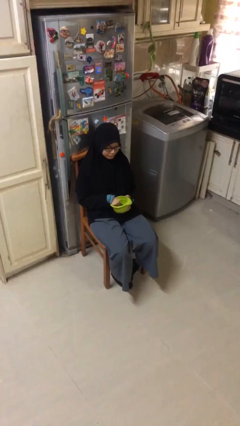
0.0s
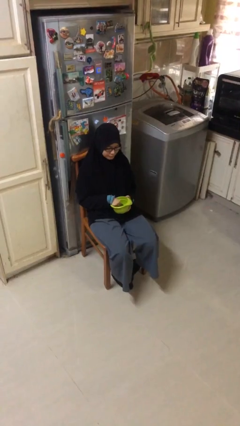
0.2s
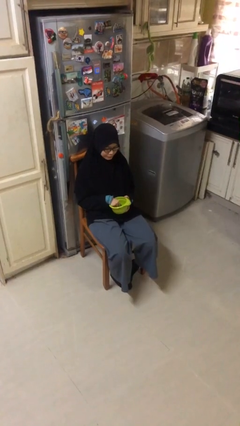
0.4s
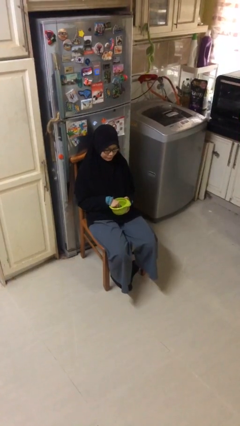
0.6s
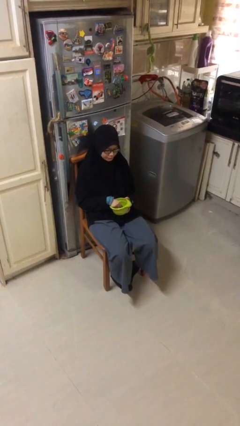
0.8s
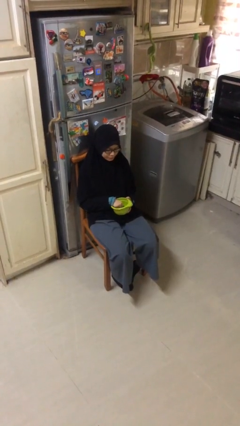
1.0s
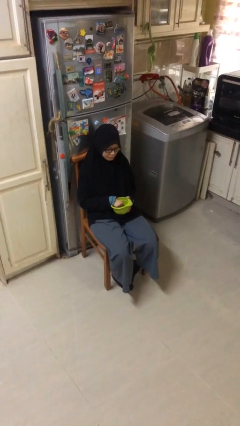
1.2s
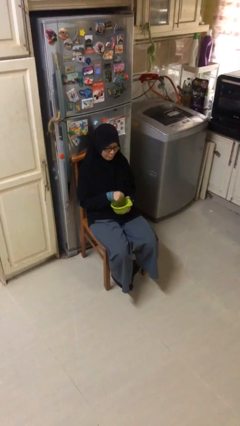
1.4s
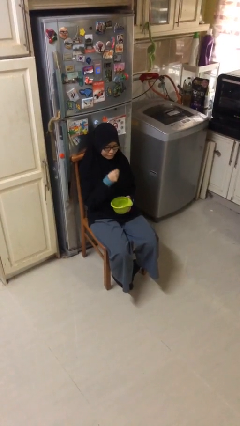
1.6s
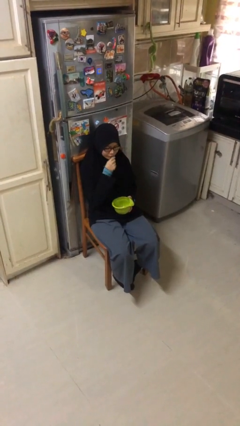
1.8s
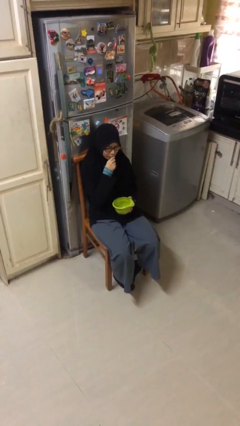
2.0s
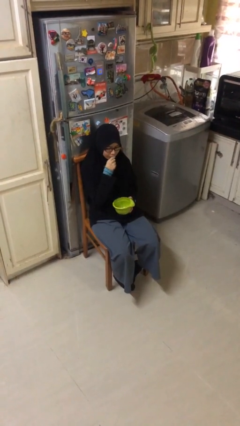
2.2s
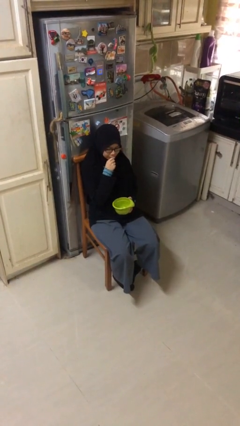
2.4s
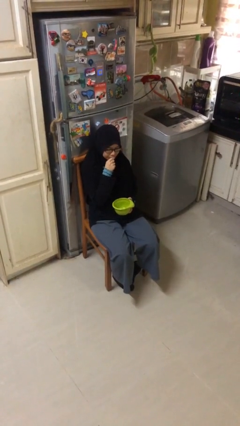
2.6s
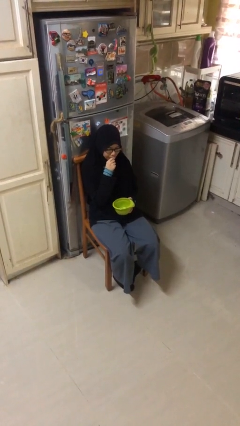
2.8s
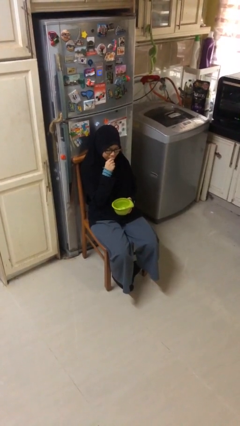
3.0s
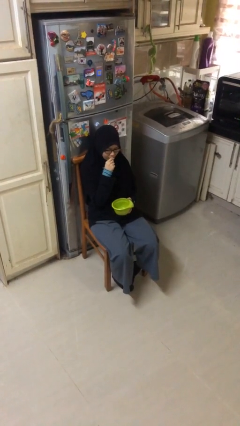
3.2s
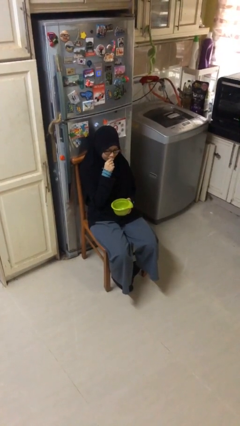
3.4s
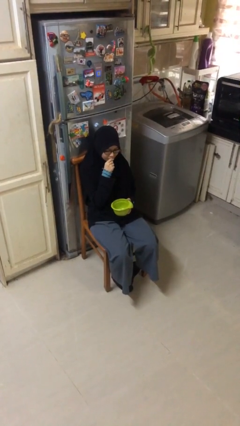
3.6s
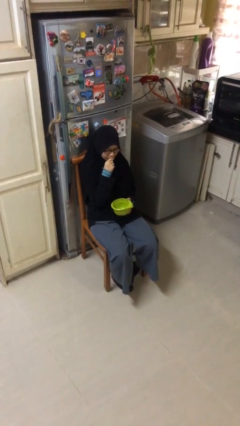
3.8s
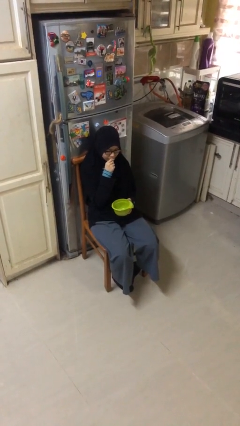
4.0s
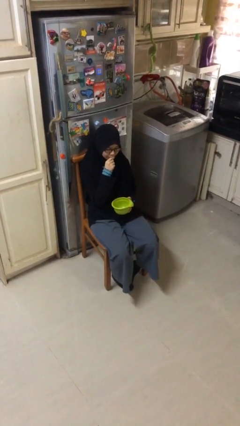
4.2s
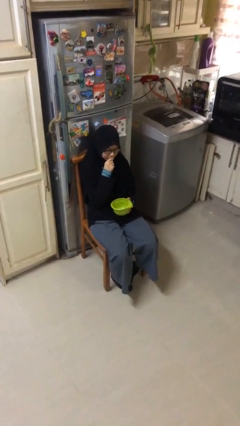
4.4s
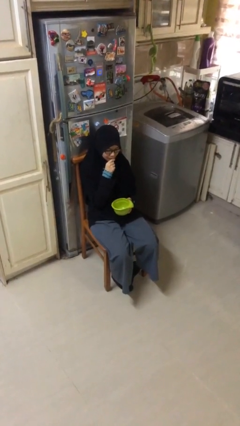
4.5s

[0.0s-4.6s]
person eats with hands

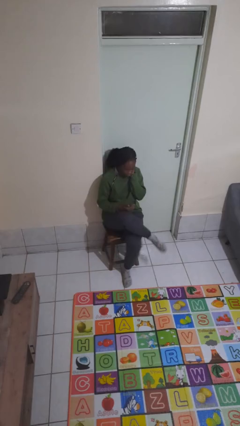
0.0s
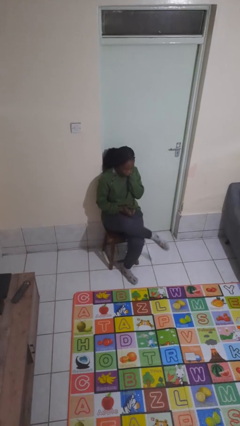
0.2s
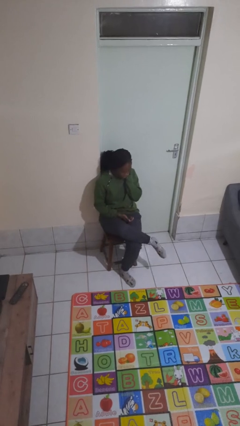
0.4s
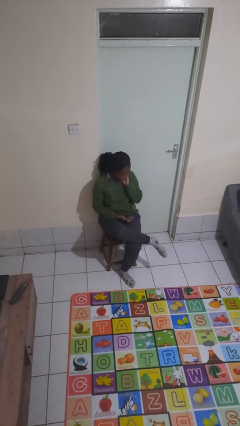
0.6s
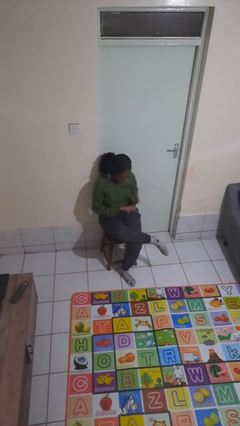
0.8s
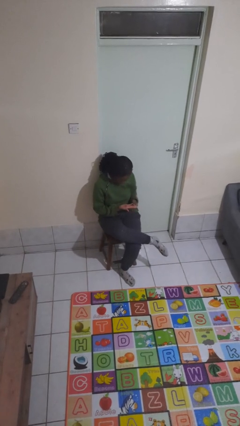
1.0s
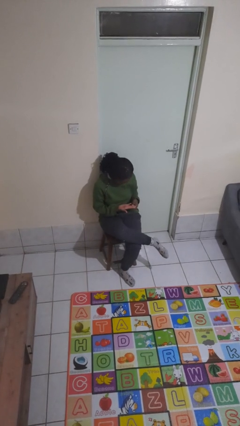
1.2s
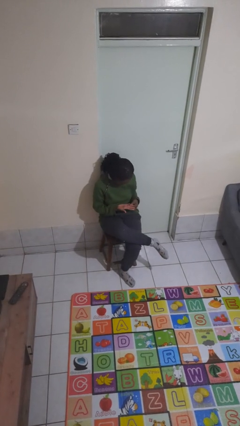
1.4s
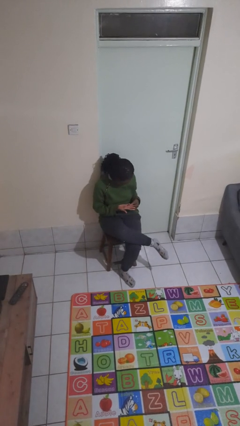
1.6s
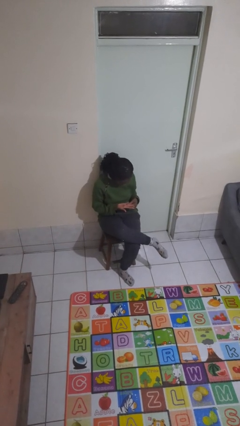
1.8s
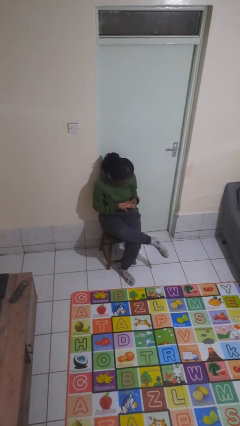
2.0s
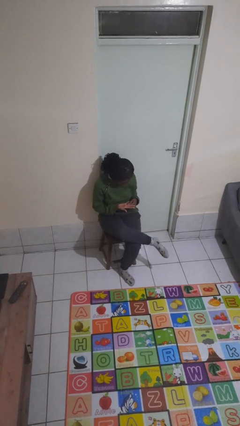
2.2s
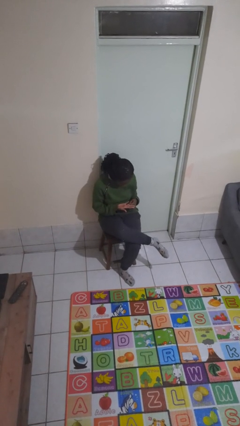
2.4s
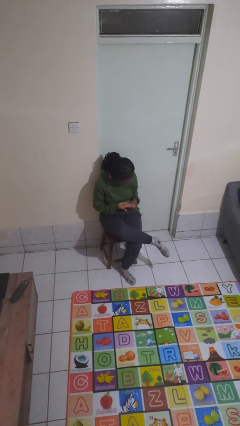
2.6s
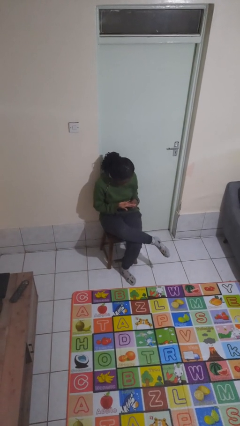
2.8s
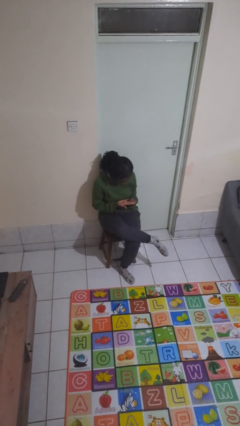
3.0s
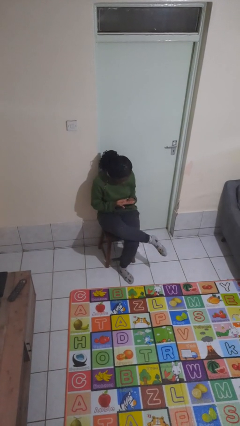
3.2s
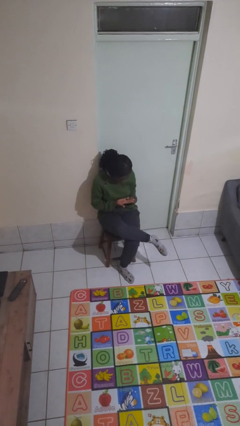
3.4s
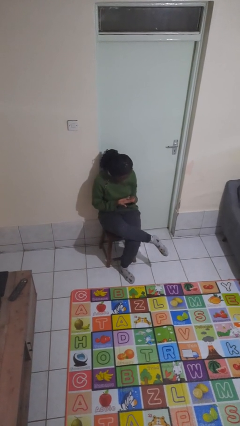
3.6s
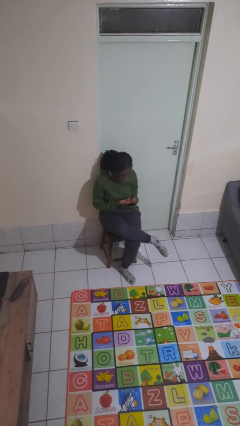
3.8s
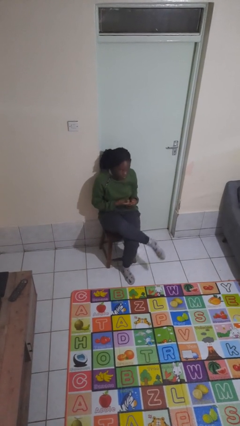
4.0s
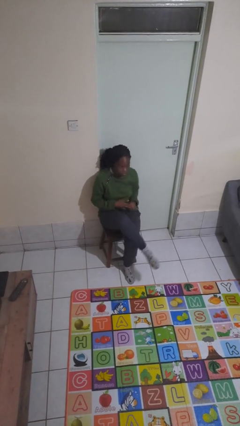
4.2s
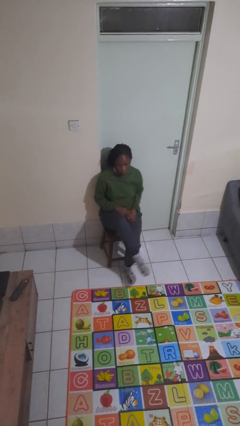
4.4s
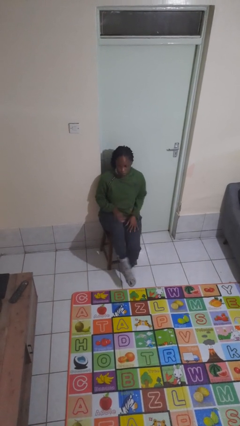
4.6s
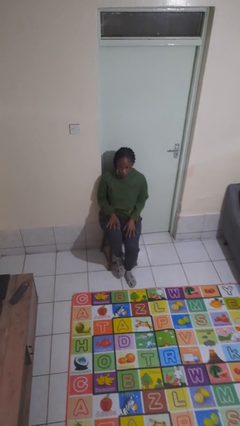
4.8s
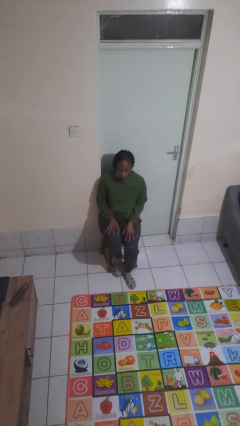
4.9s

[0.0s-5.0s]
person looks at hands in lap

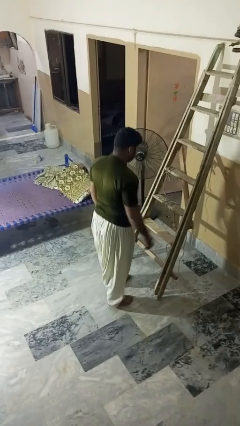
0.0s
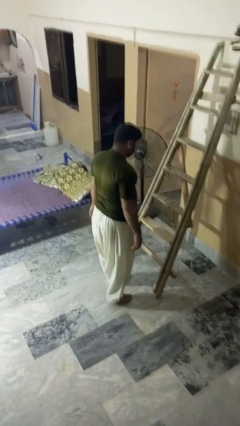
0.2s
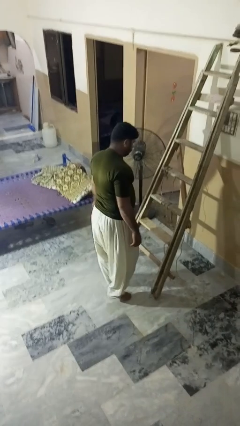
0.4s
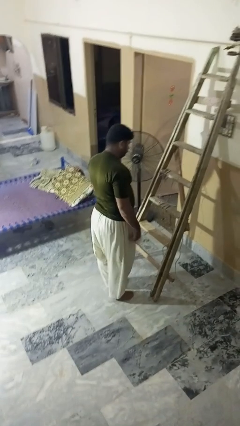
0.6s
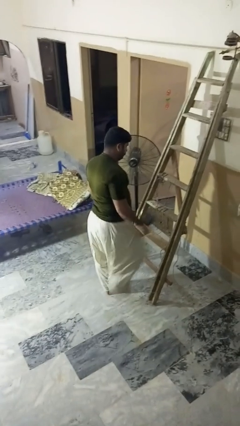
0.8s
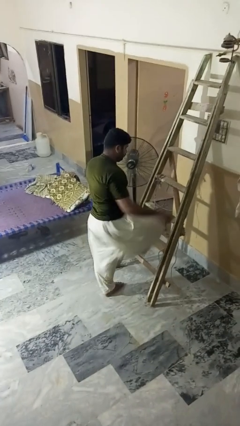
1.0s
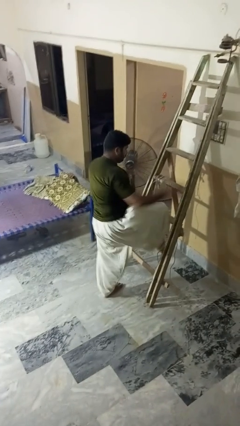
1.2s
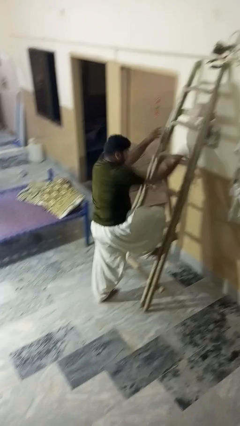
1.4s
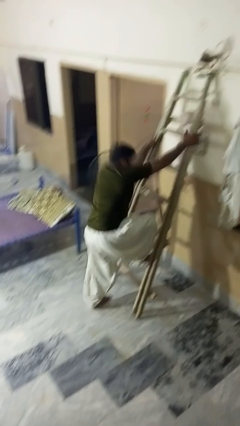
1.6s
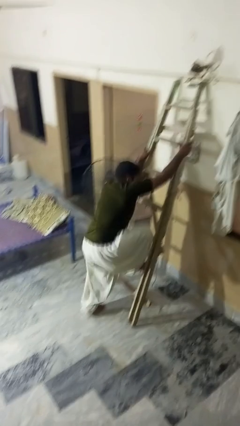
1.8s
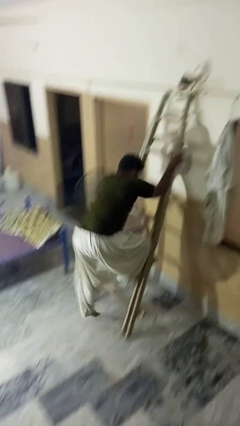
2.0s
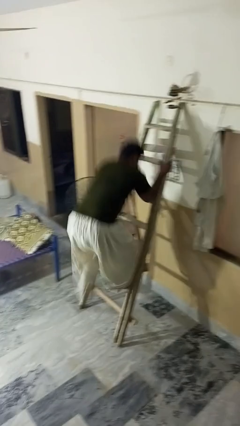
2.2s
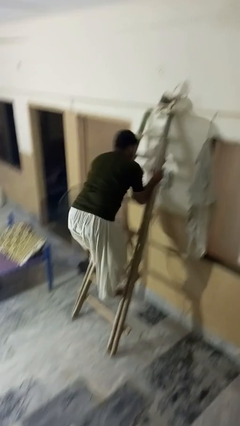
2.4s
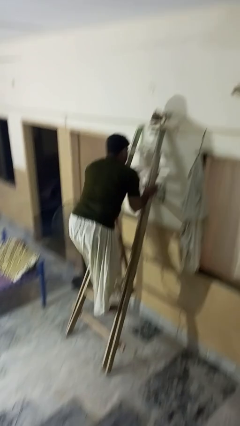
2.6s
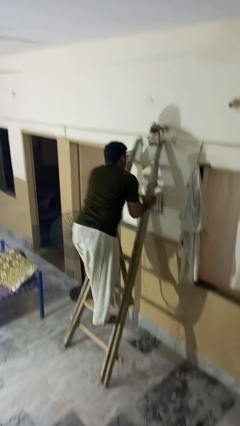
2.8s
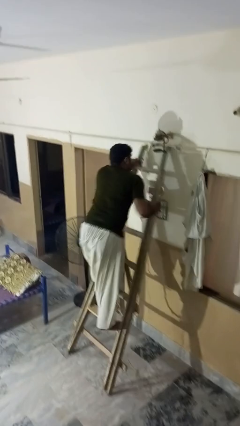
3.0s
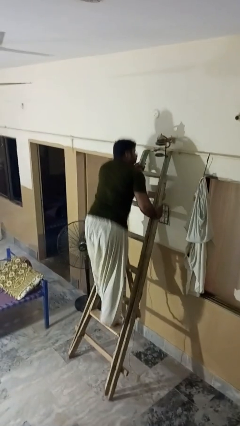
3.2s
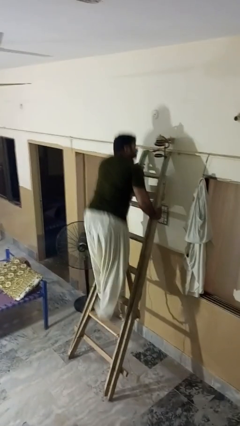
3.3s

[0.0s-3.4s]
person climbs up ladder

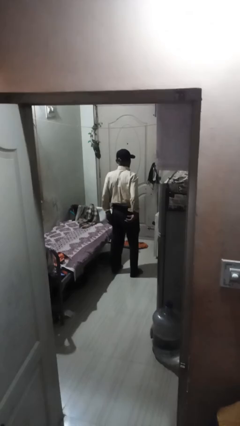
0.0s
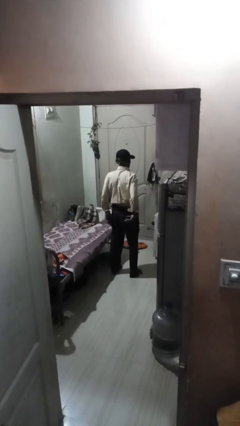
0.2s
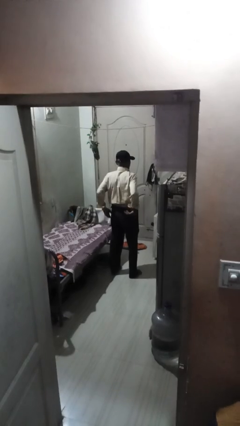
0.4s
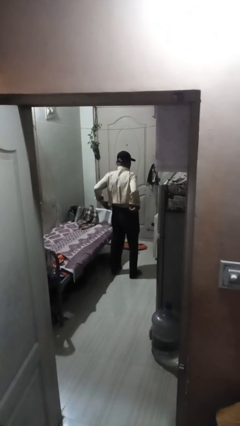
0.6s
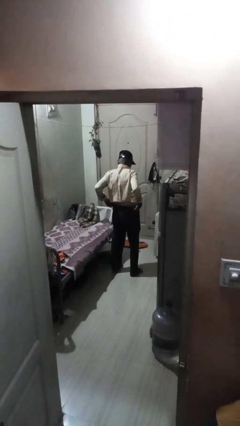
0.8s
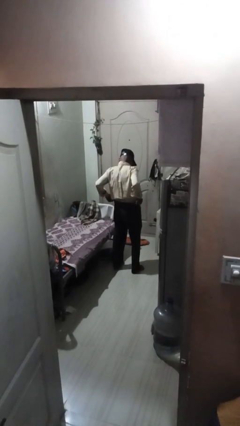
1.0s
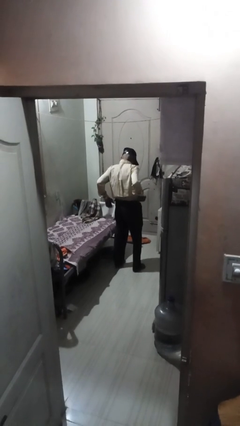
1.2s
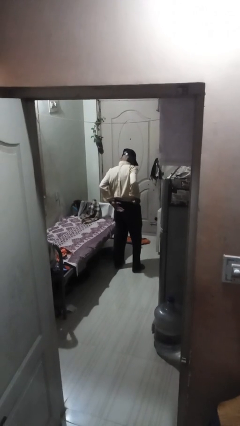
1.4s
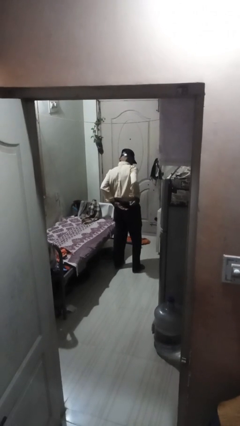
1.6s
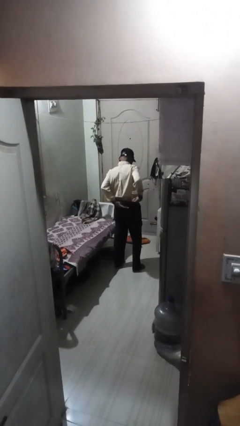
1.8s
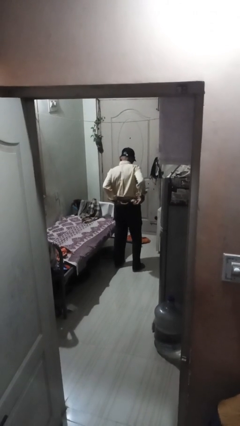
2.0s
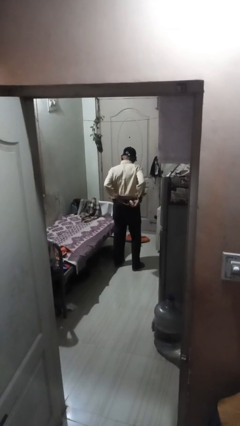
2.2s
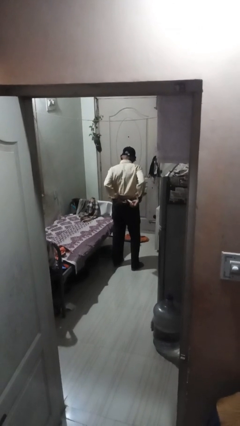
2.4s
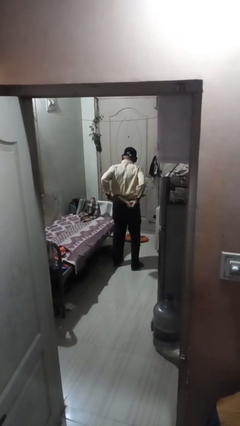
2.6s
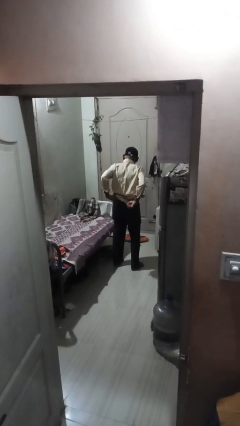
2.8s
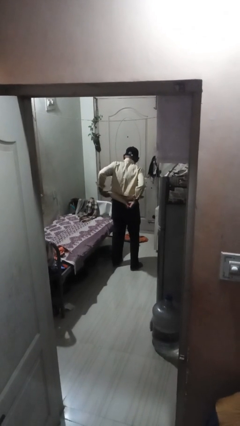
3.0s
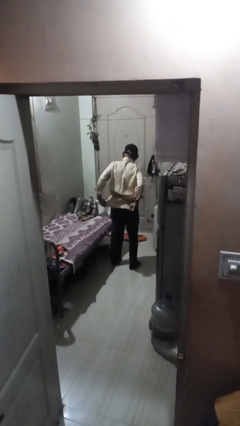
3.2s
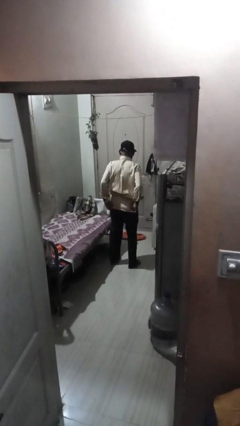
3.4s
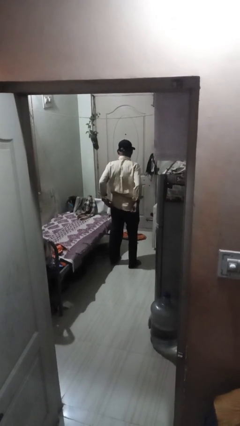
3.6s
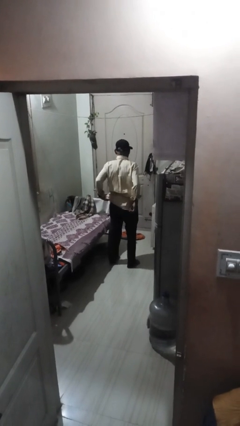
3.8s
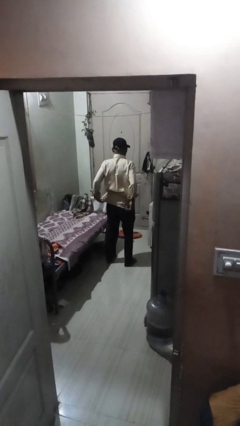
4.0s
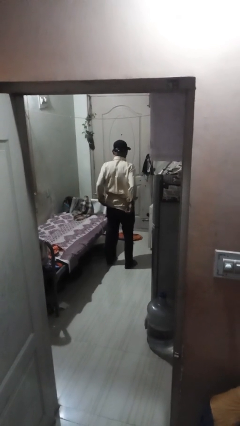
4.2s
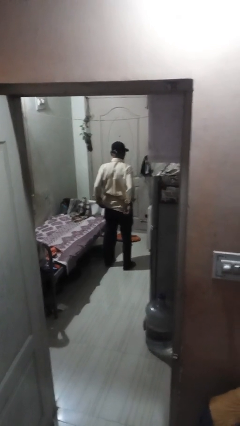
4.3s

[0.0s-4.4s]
person untucks shirt

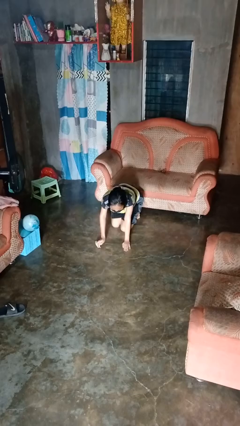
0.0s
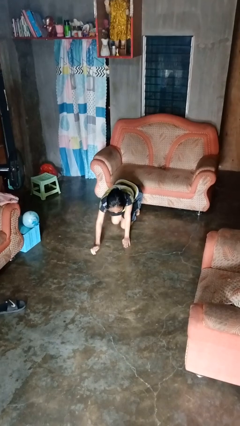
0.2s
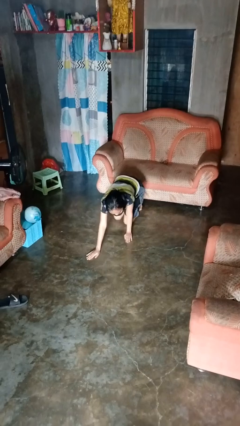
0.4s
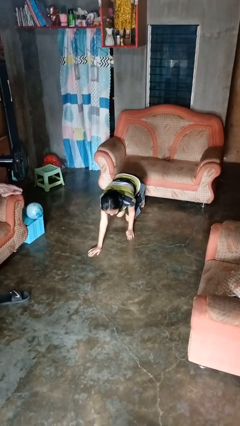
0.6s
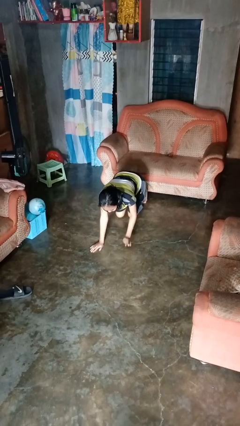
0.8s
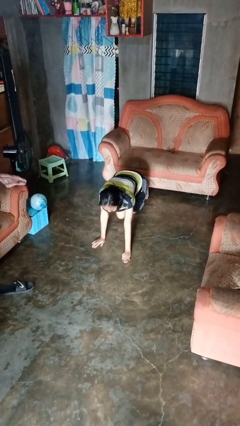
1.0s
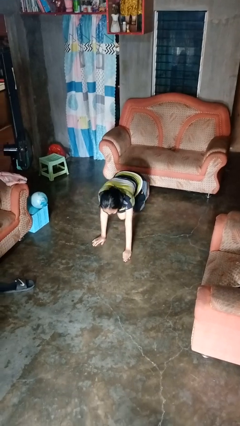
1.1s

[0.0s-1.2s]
person crawls
